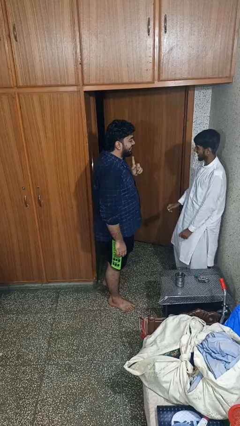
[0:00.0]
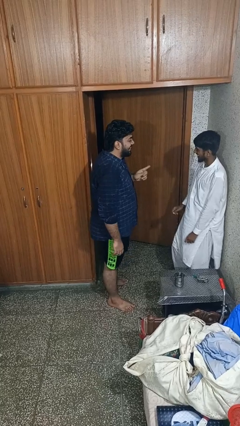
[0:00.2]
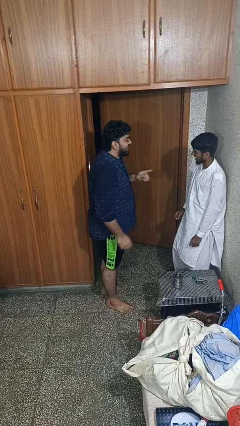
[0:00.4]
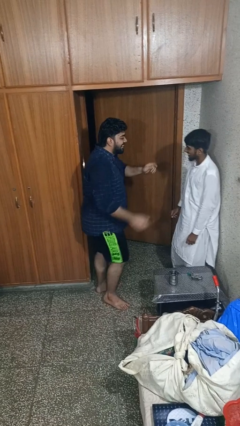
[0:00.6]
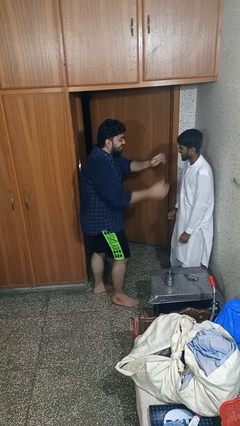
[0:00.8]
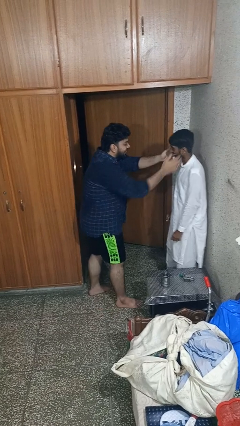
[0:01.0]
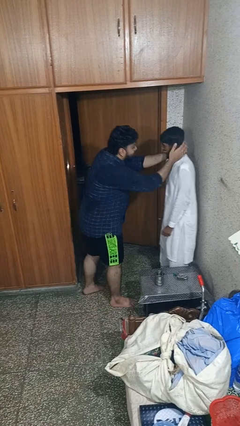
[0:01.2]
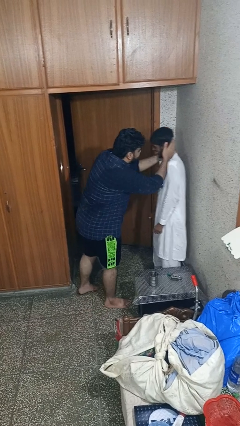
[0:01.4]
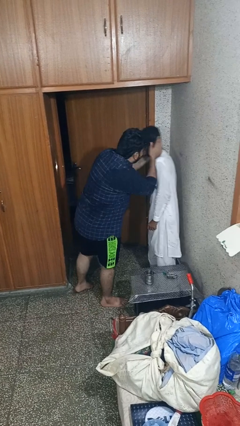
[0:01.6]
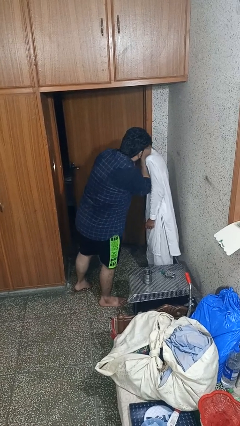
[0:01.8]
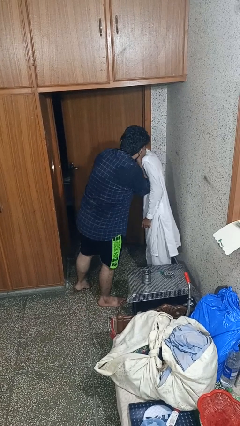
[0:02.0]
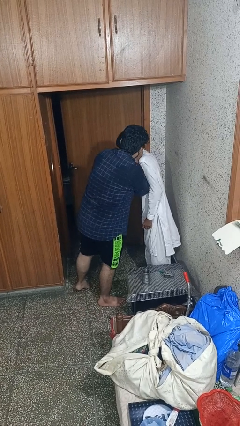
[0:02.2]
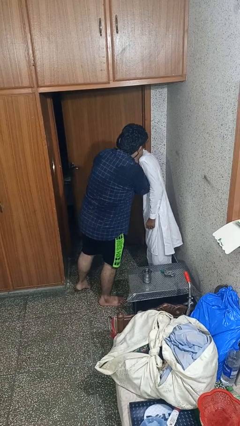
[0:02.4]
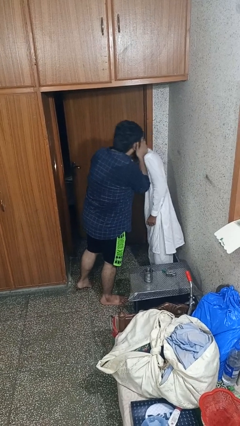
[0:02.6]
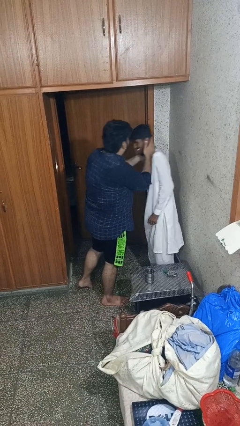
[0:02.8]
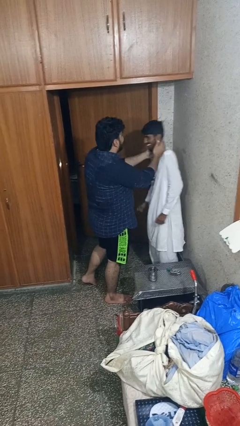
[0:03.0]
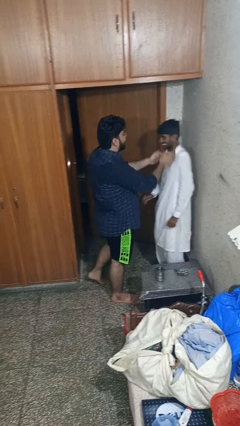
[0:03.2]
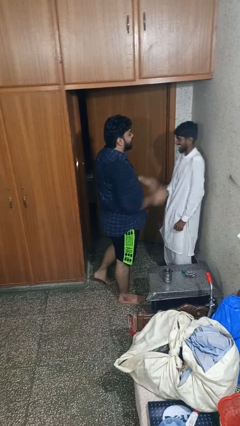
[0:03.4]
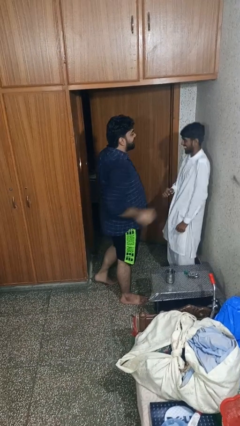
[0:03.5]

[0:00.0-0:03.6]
person kisses cheek of person

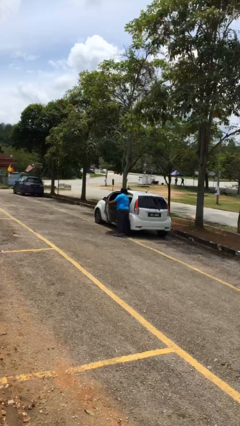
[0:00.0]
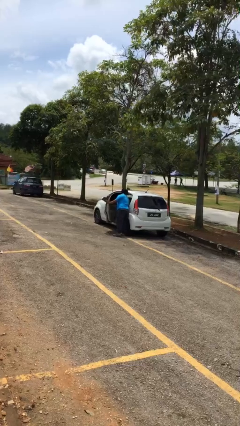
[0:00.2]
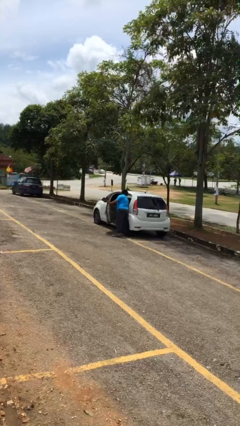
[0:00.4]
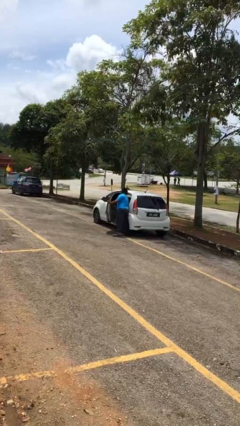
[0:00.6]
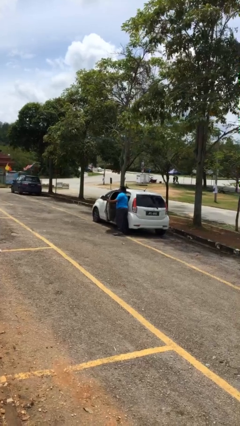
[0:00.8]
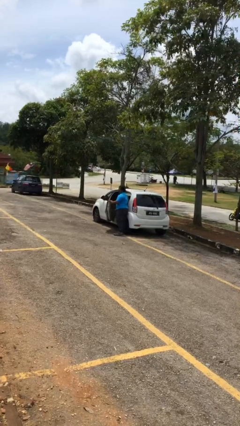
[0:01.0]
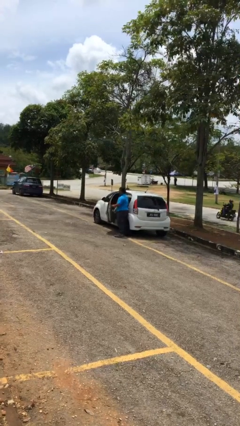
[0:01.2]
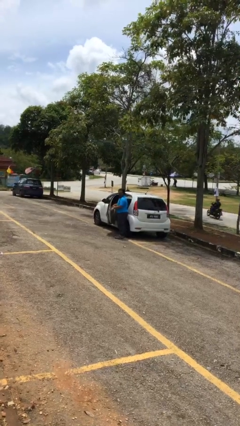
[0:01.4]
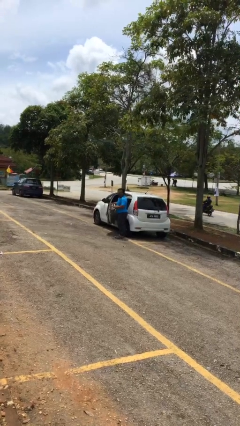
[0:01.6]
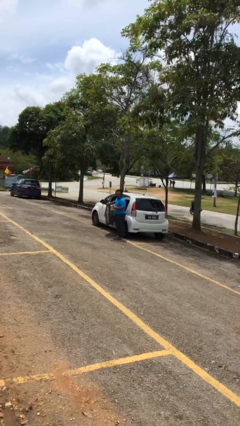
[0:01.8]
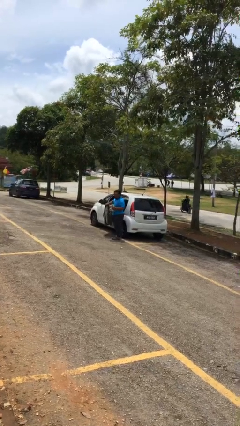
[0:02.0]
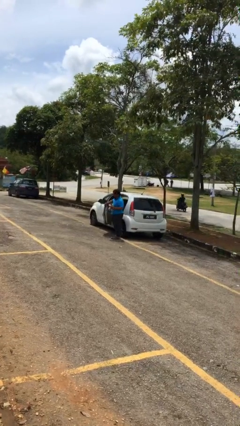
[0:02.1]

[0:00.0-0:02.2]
person unloads car

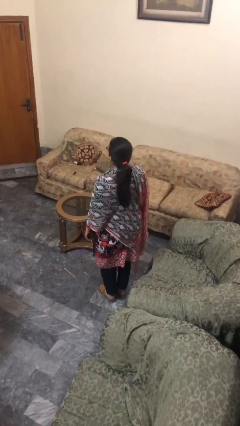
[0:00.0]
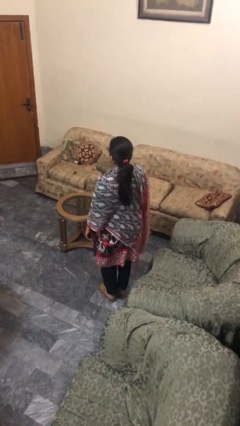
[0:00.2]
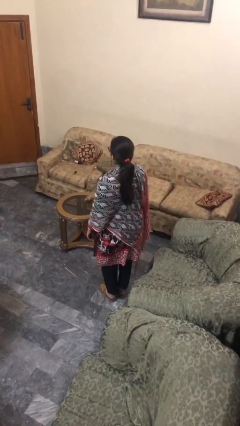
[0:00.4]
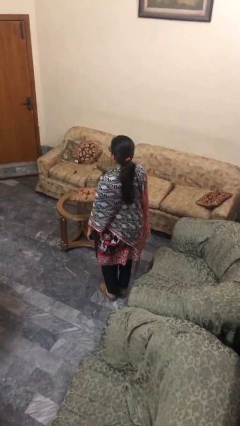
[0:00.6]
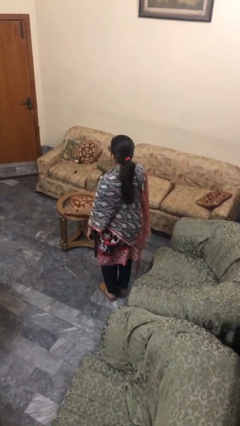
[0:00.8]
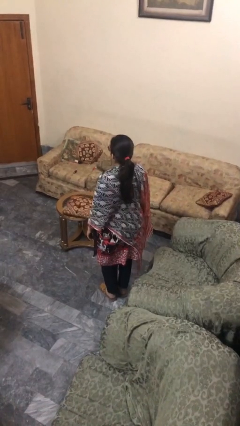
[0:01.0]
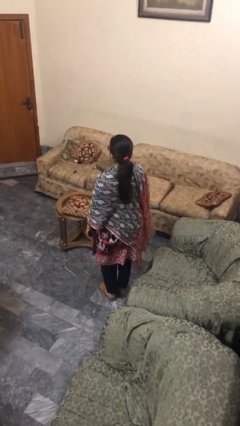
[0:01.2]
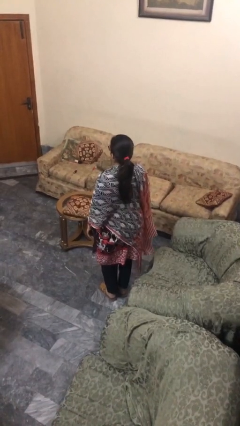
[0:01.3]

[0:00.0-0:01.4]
person throws object on table

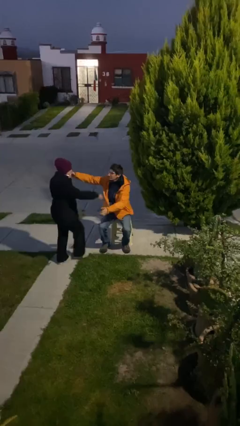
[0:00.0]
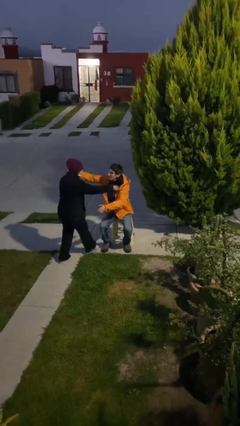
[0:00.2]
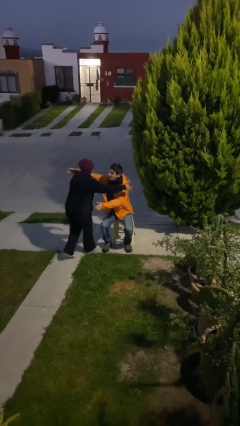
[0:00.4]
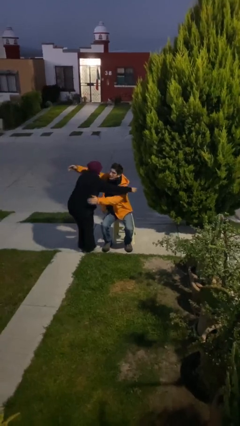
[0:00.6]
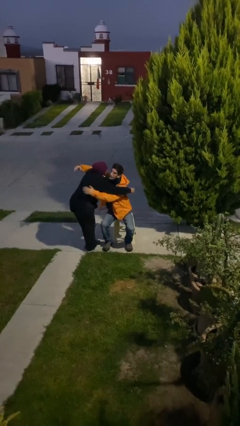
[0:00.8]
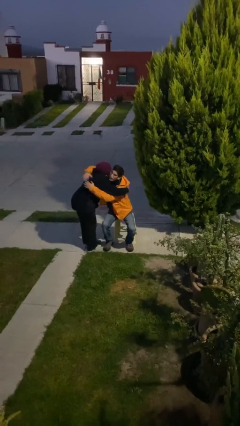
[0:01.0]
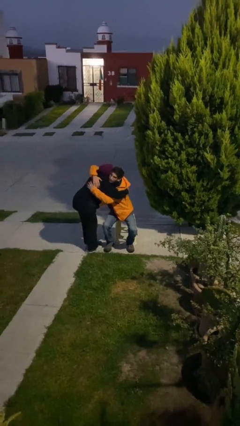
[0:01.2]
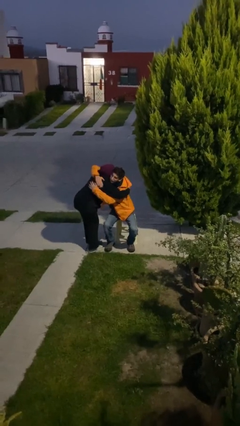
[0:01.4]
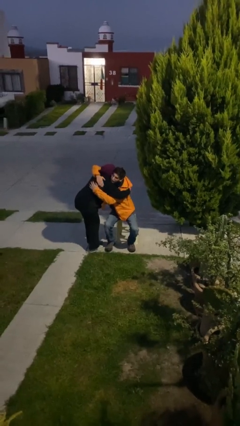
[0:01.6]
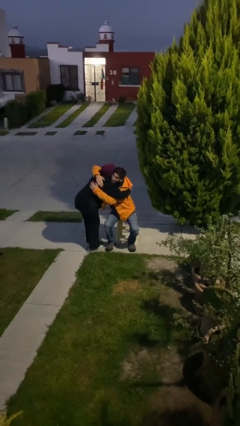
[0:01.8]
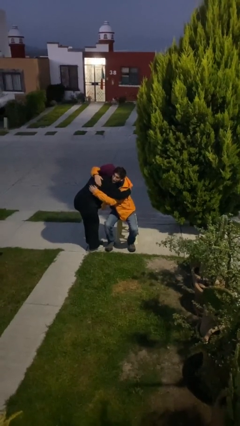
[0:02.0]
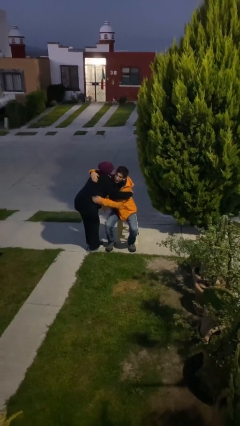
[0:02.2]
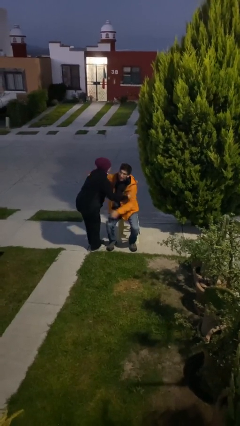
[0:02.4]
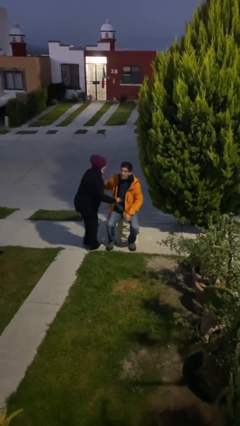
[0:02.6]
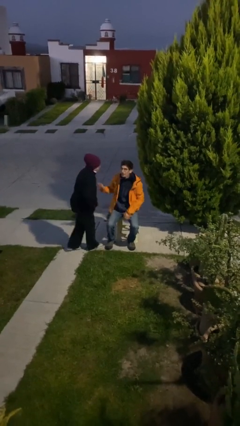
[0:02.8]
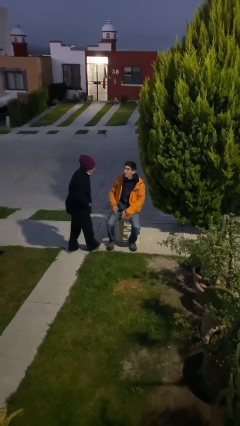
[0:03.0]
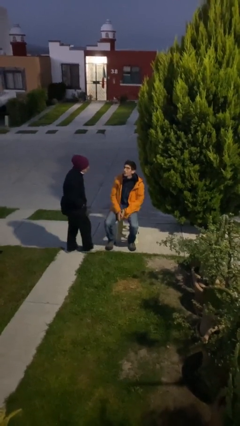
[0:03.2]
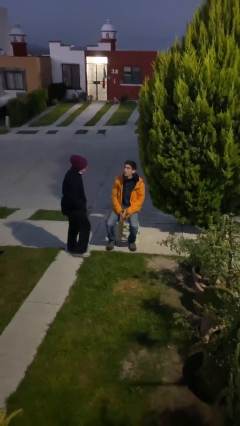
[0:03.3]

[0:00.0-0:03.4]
person embraces person

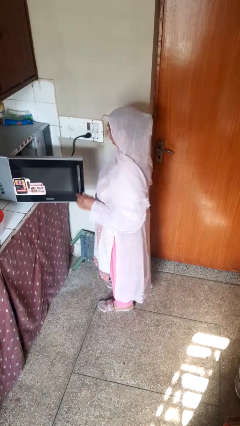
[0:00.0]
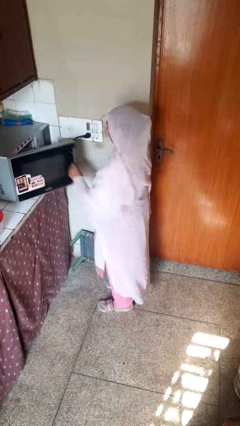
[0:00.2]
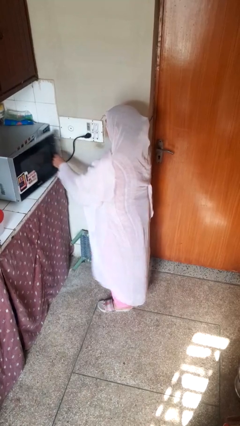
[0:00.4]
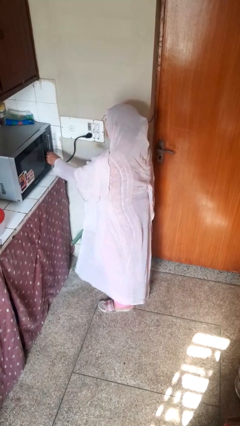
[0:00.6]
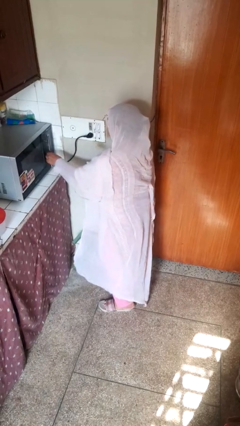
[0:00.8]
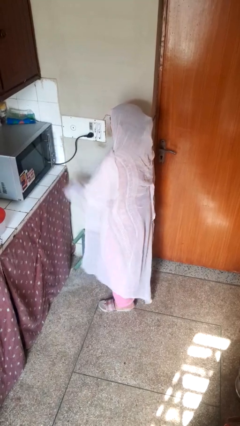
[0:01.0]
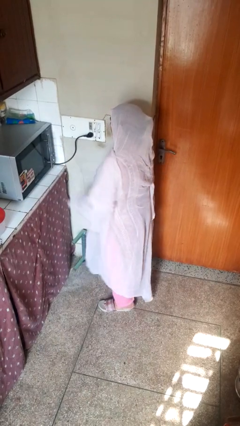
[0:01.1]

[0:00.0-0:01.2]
person closes oven door

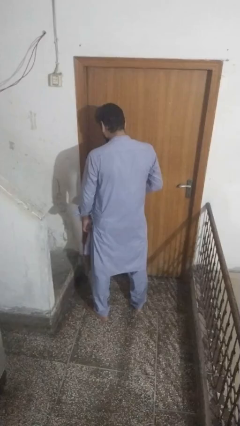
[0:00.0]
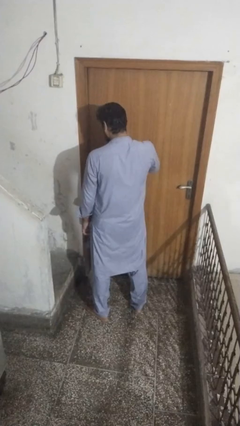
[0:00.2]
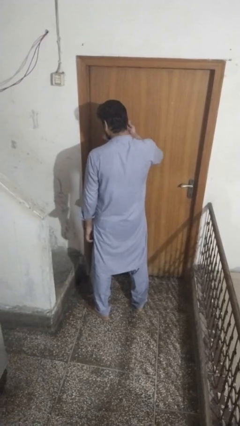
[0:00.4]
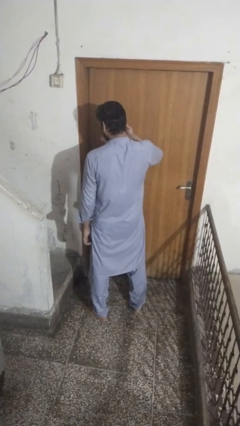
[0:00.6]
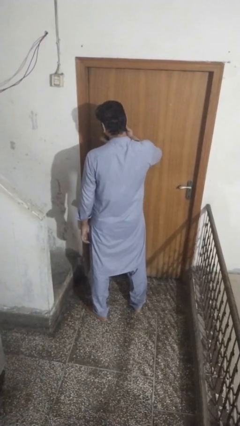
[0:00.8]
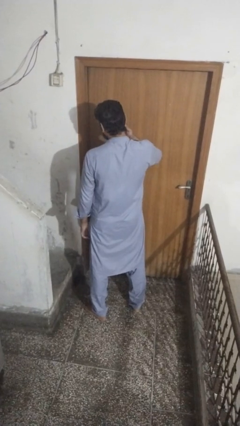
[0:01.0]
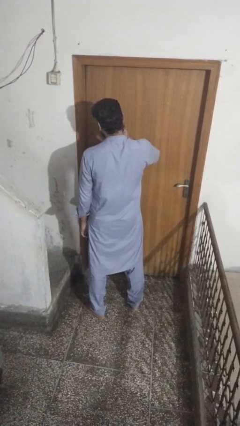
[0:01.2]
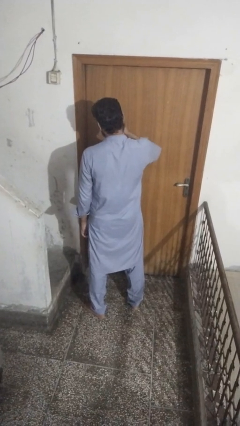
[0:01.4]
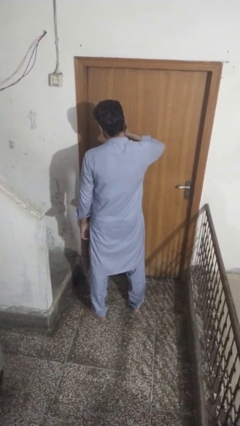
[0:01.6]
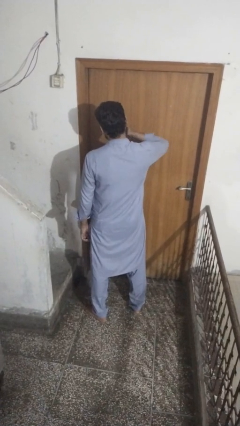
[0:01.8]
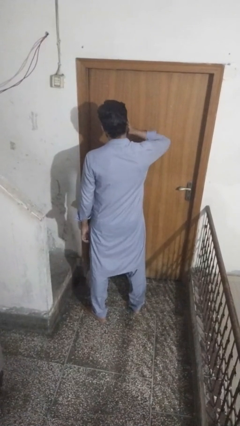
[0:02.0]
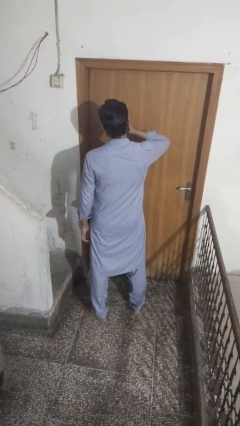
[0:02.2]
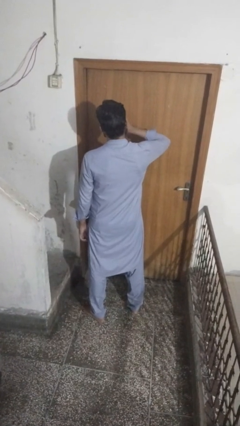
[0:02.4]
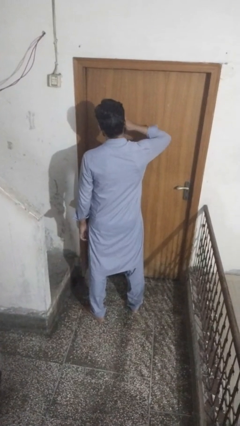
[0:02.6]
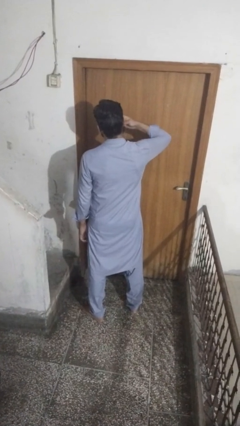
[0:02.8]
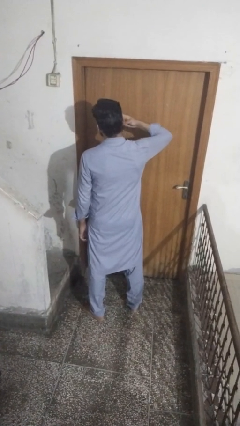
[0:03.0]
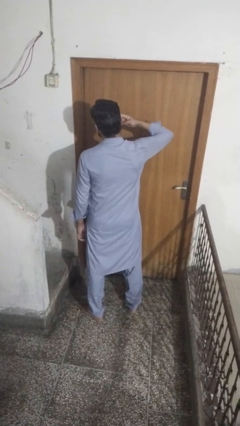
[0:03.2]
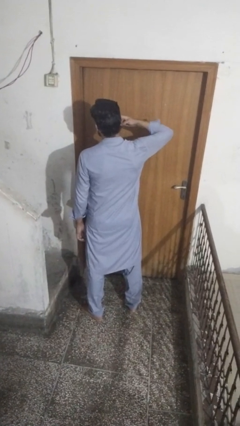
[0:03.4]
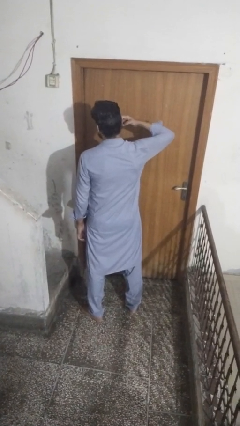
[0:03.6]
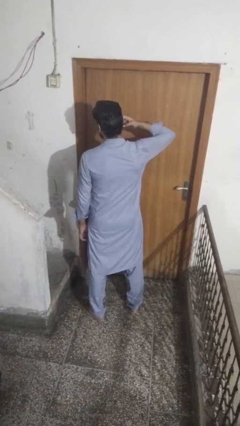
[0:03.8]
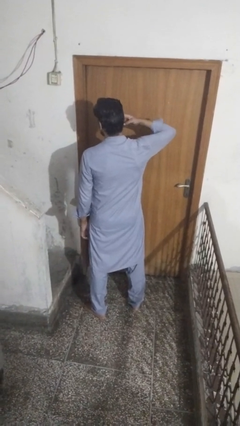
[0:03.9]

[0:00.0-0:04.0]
person rubs eyes

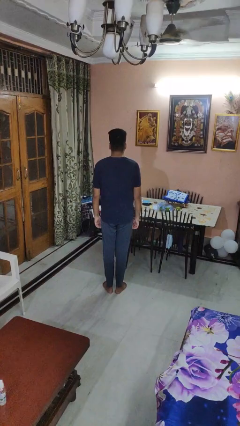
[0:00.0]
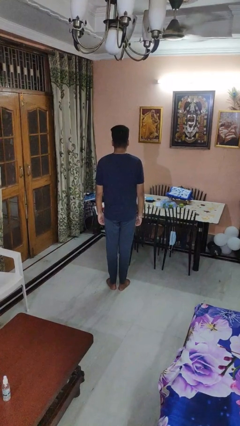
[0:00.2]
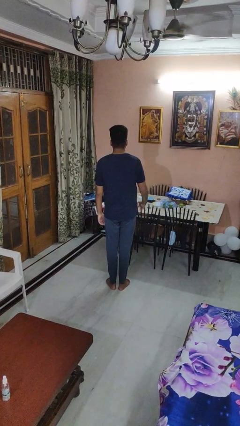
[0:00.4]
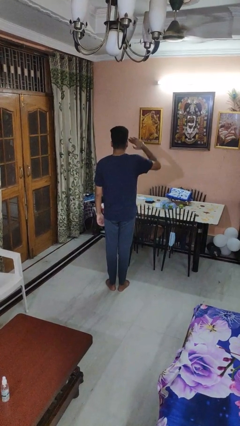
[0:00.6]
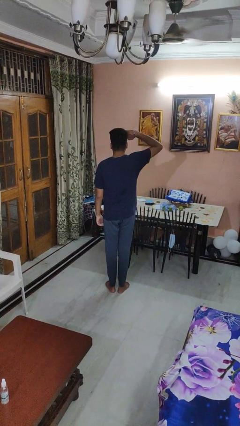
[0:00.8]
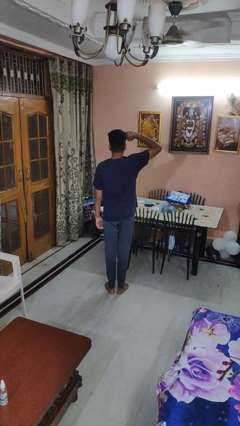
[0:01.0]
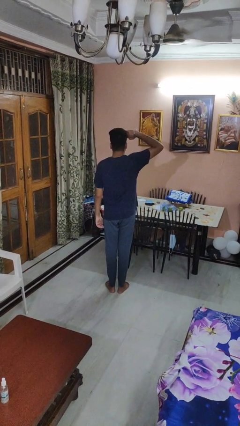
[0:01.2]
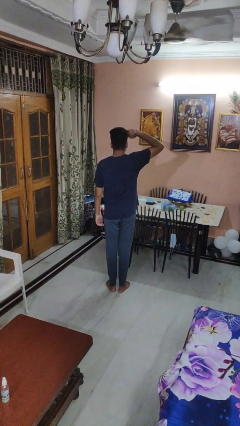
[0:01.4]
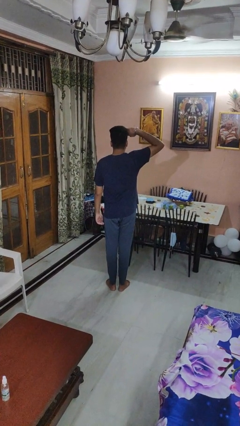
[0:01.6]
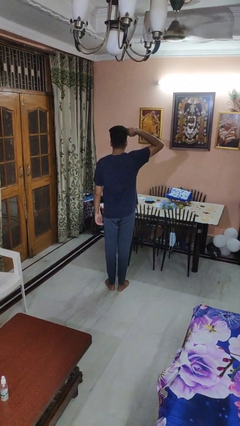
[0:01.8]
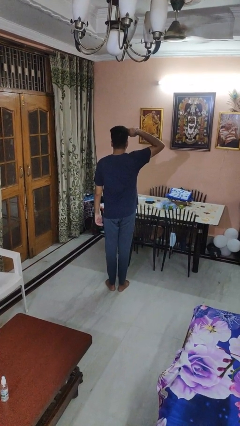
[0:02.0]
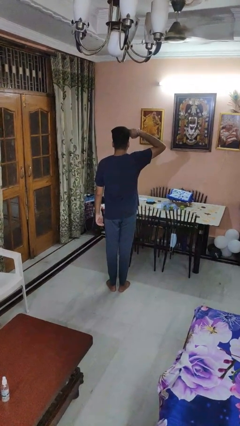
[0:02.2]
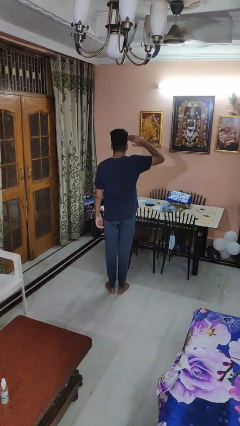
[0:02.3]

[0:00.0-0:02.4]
person salutes
